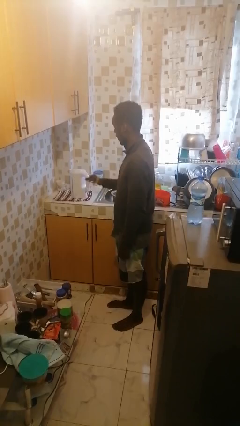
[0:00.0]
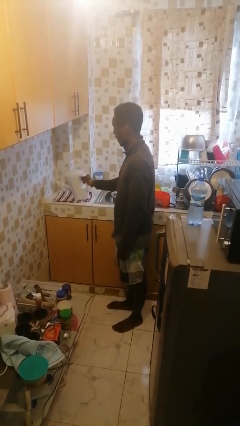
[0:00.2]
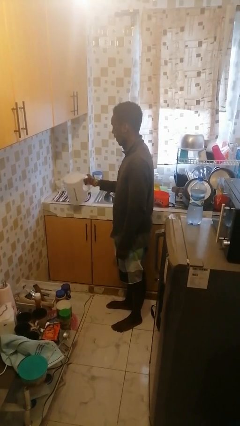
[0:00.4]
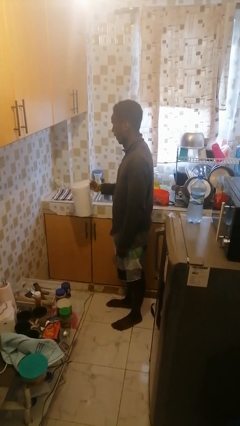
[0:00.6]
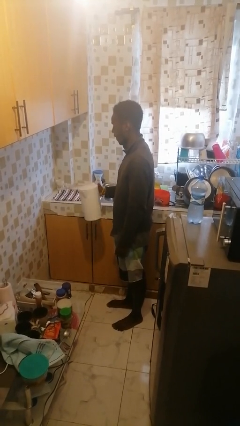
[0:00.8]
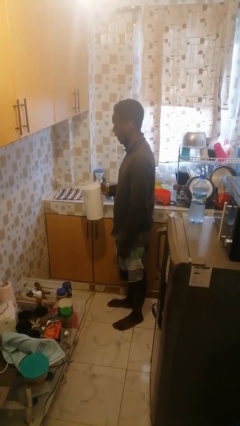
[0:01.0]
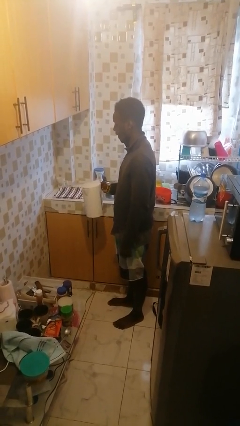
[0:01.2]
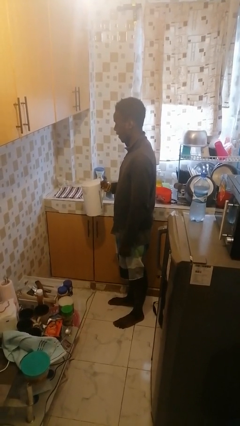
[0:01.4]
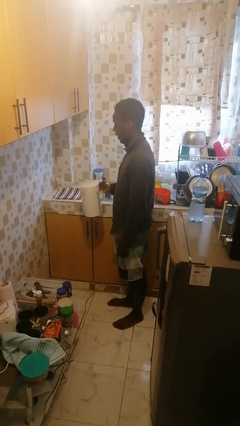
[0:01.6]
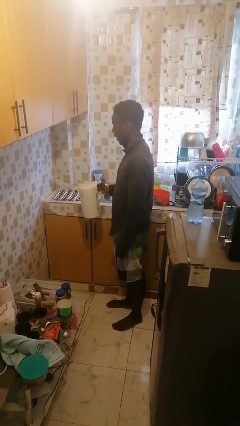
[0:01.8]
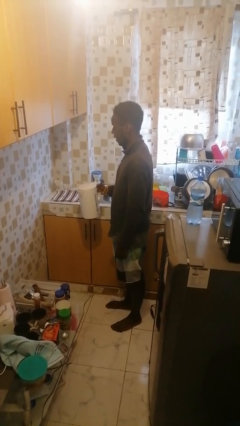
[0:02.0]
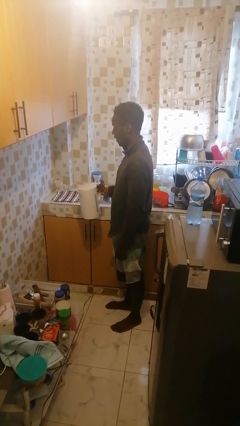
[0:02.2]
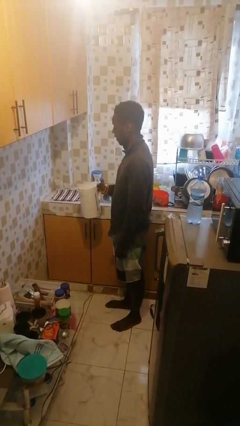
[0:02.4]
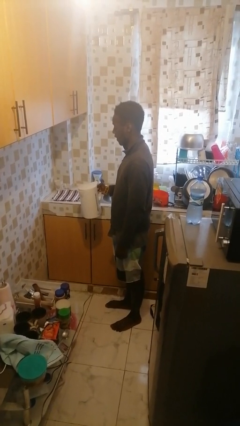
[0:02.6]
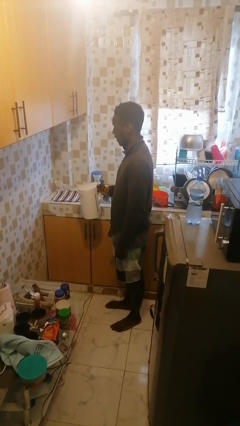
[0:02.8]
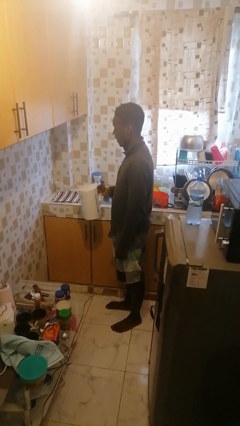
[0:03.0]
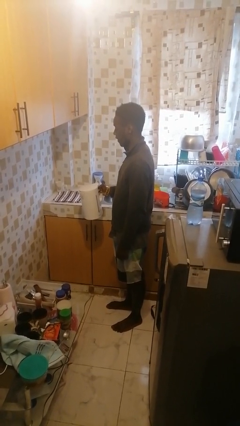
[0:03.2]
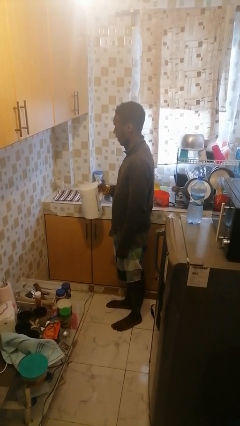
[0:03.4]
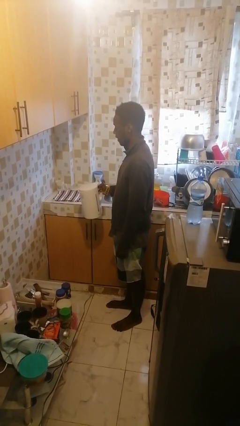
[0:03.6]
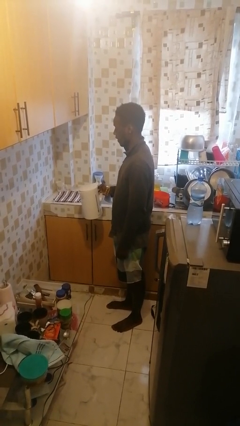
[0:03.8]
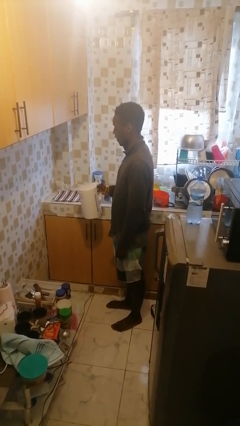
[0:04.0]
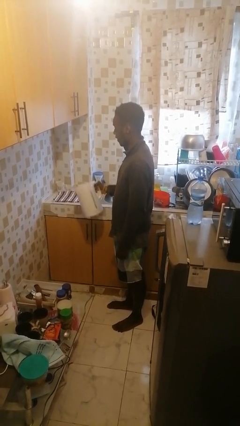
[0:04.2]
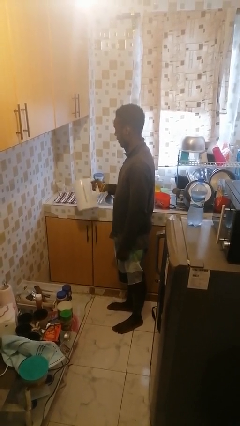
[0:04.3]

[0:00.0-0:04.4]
person picks up object from countertop

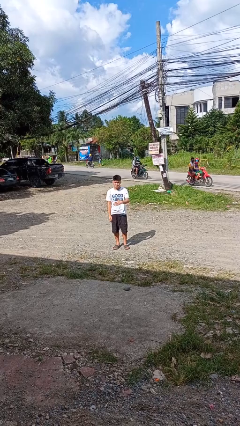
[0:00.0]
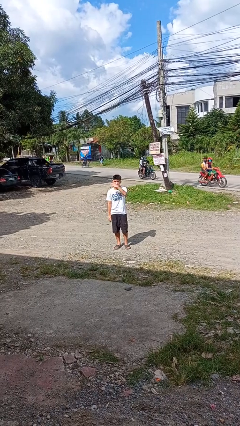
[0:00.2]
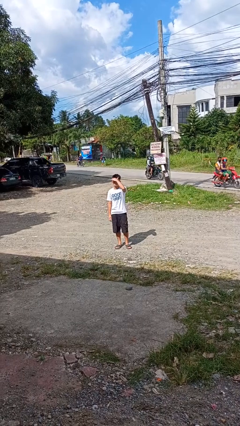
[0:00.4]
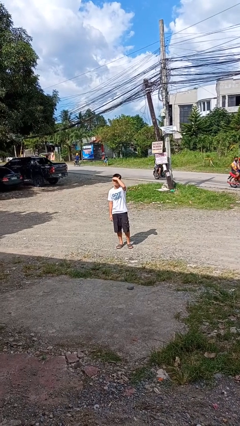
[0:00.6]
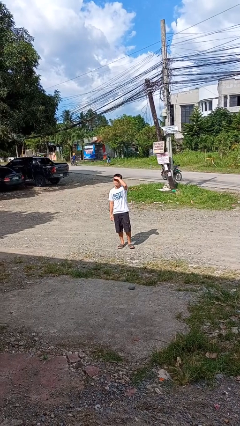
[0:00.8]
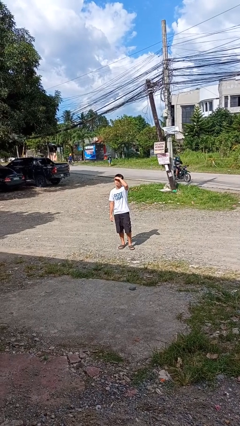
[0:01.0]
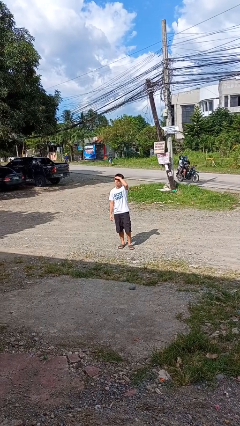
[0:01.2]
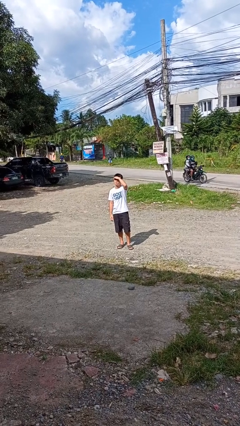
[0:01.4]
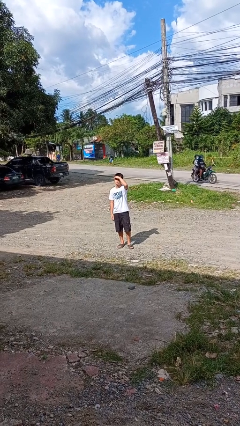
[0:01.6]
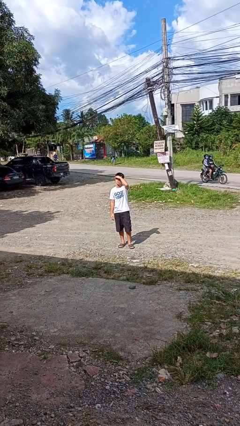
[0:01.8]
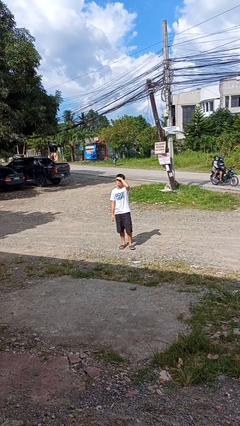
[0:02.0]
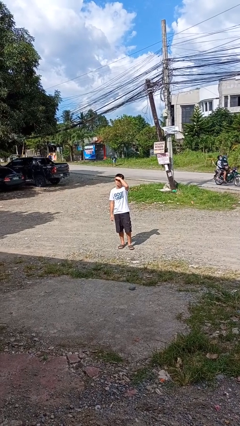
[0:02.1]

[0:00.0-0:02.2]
person shades eyes

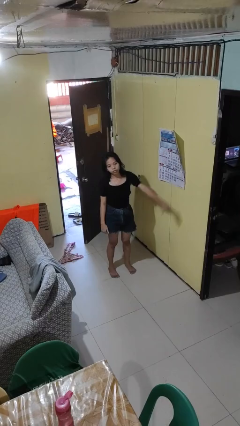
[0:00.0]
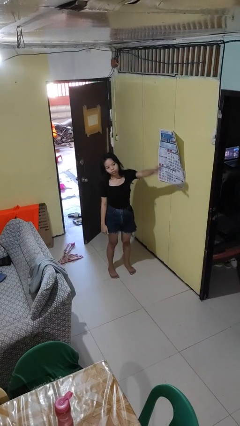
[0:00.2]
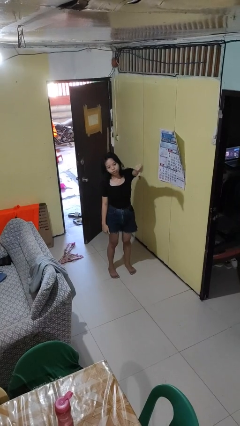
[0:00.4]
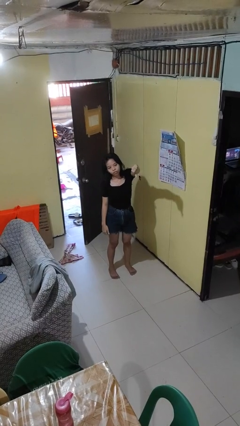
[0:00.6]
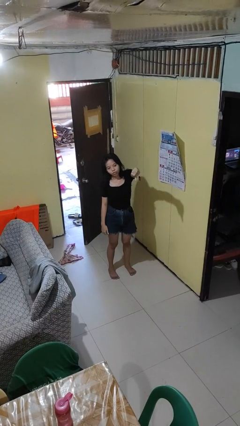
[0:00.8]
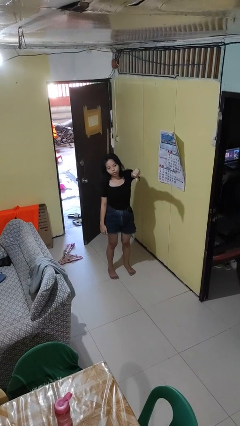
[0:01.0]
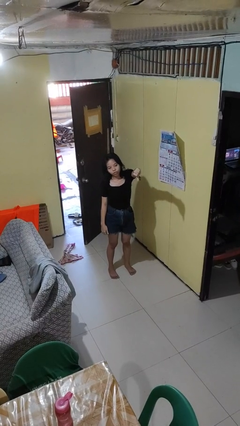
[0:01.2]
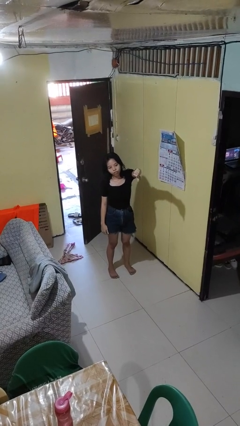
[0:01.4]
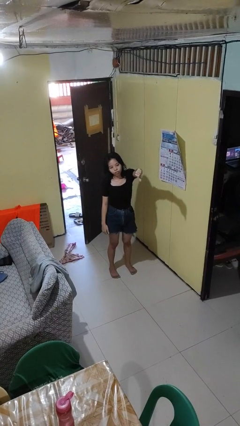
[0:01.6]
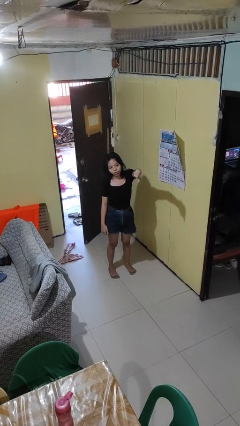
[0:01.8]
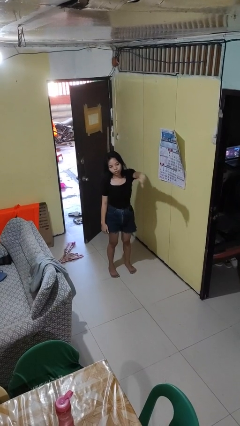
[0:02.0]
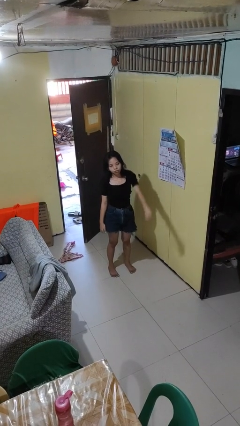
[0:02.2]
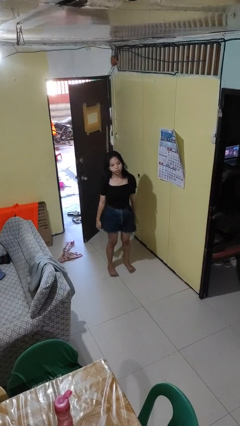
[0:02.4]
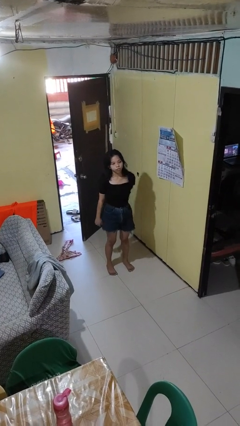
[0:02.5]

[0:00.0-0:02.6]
person gestures thumbs down

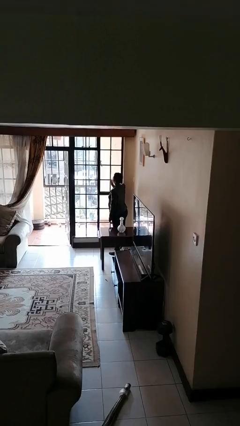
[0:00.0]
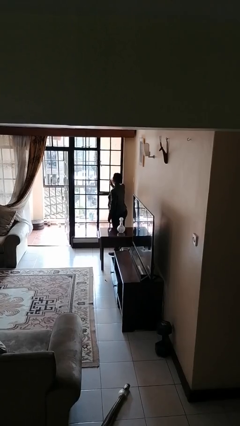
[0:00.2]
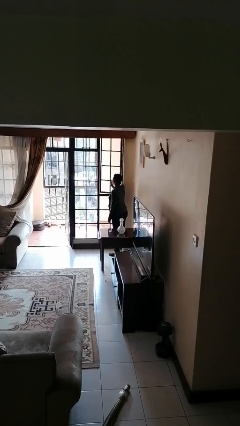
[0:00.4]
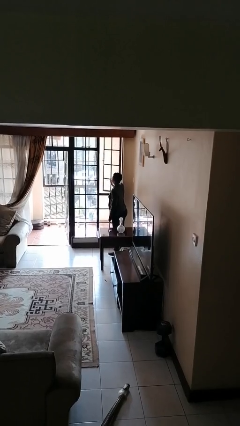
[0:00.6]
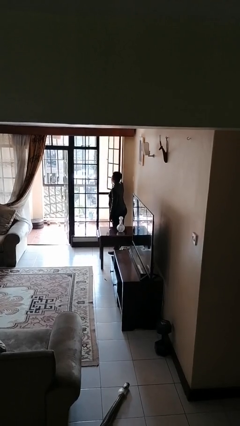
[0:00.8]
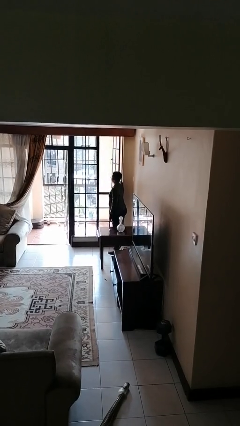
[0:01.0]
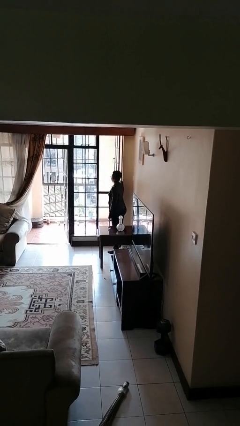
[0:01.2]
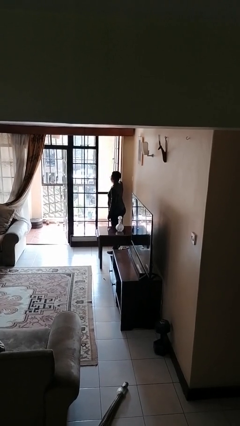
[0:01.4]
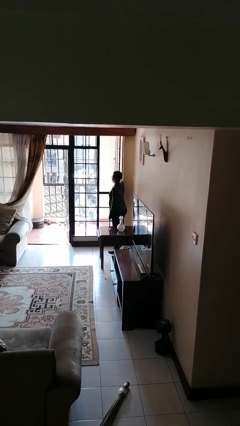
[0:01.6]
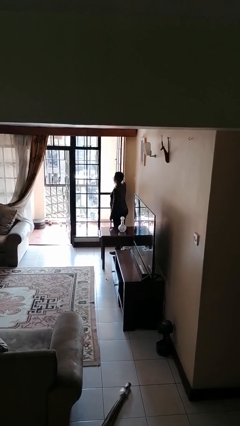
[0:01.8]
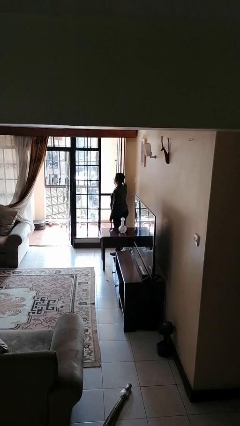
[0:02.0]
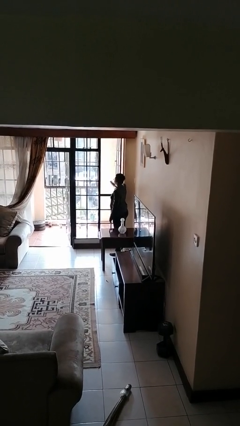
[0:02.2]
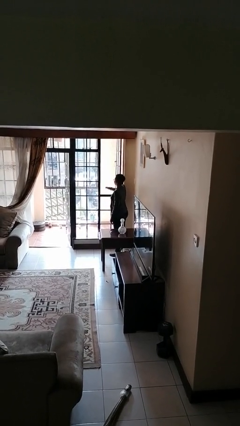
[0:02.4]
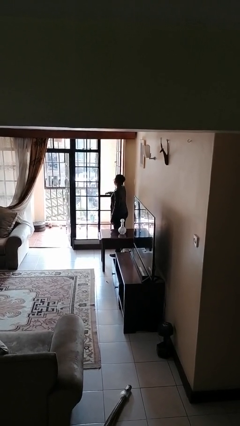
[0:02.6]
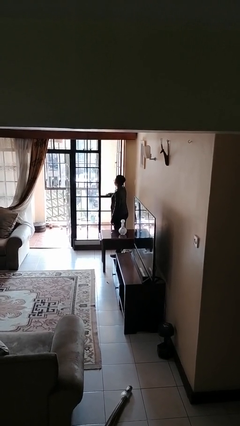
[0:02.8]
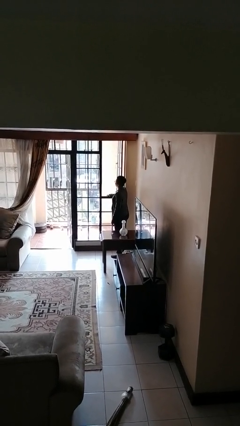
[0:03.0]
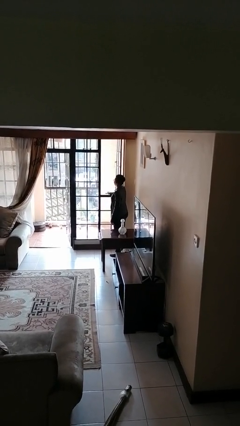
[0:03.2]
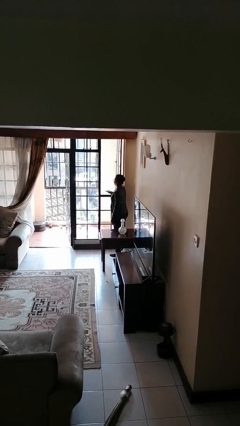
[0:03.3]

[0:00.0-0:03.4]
person opens home window

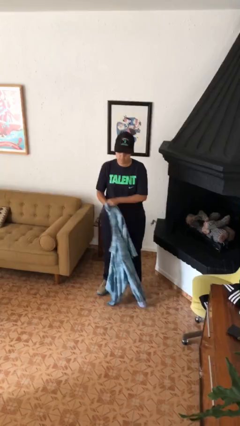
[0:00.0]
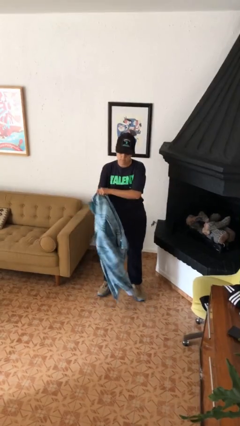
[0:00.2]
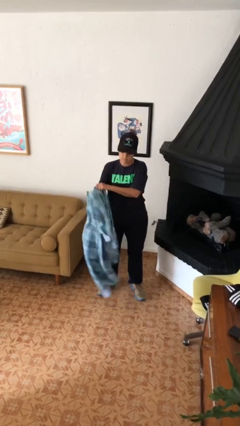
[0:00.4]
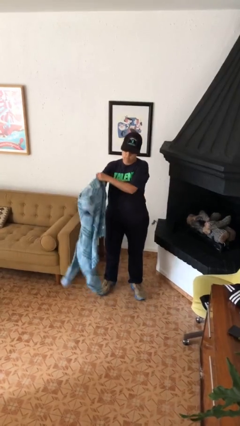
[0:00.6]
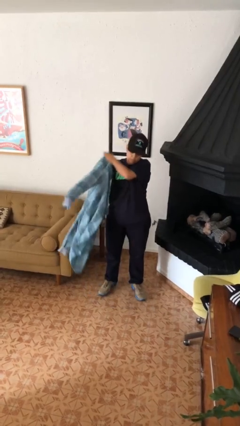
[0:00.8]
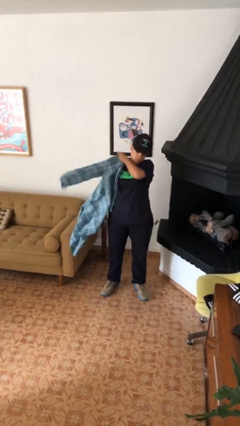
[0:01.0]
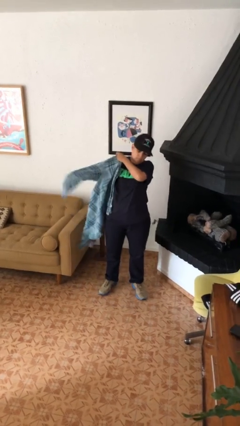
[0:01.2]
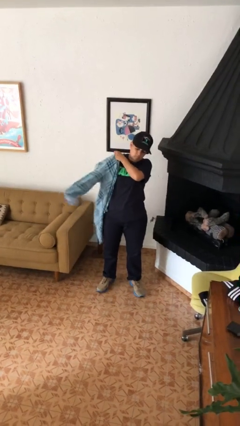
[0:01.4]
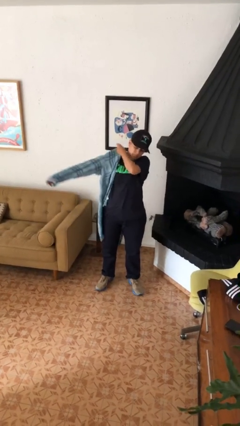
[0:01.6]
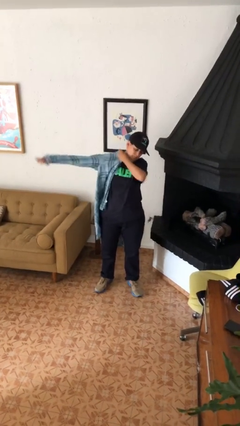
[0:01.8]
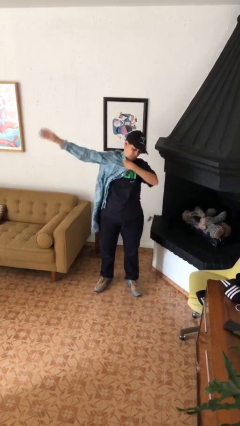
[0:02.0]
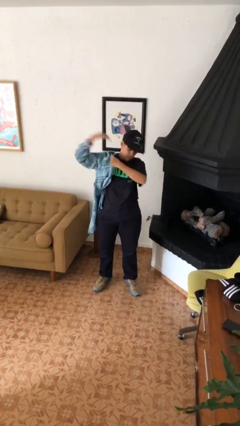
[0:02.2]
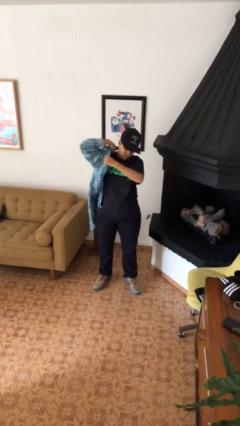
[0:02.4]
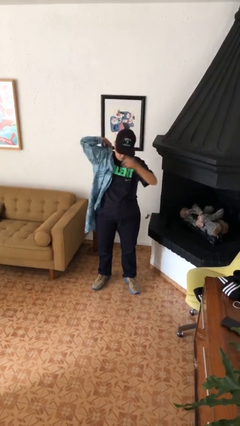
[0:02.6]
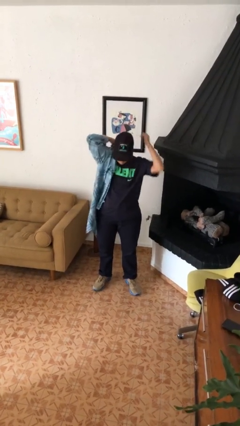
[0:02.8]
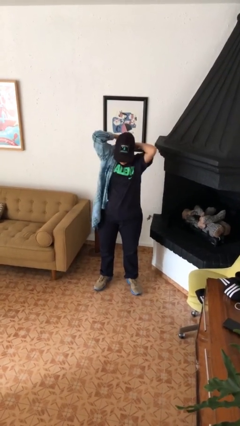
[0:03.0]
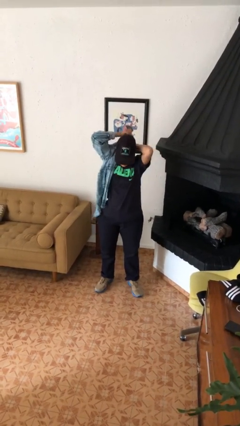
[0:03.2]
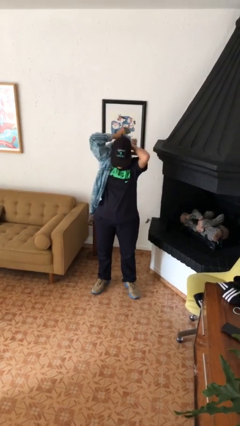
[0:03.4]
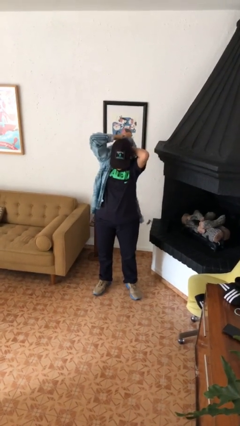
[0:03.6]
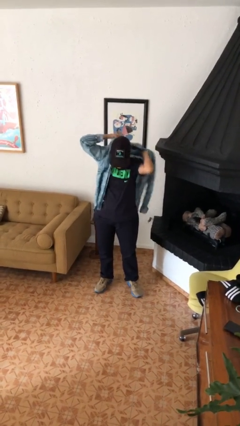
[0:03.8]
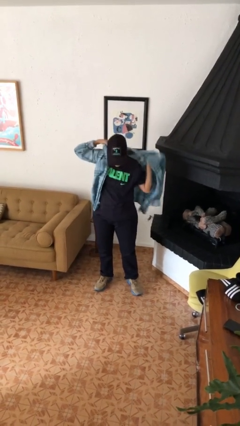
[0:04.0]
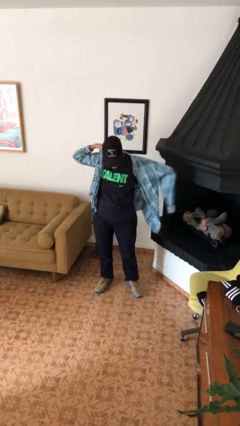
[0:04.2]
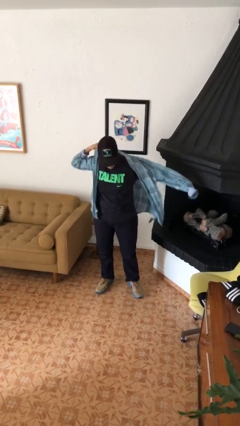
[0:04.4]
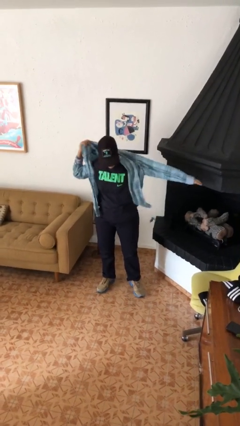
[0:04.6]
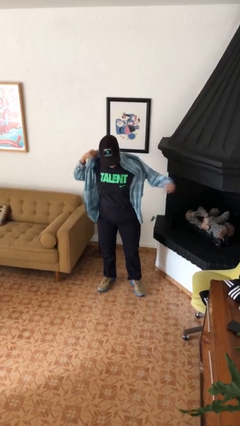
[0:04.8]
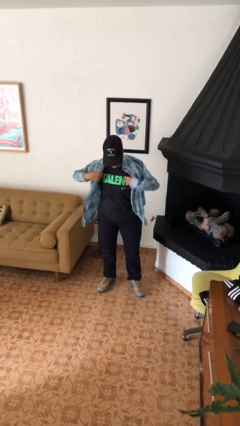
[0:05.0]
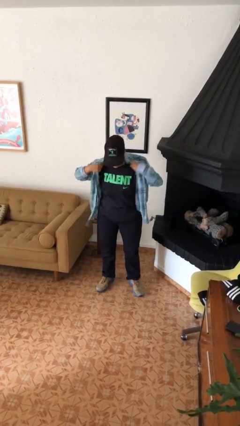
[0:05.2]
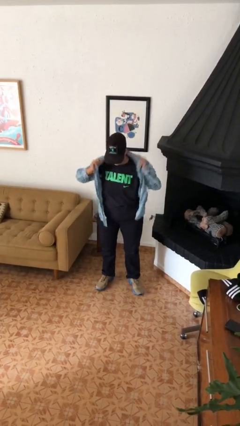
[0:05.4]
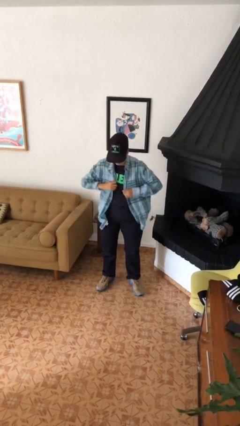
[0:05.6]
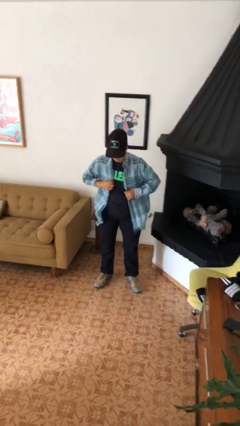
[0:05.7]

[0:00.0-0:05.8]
person puts on shirt
